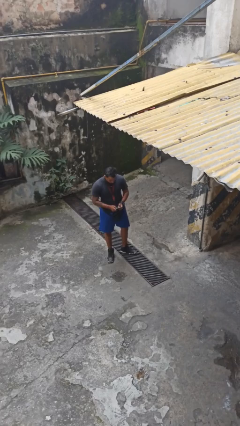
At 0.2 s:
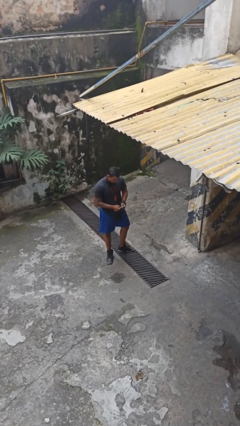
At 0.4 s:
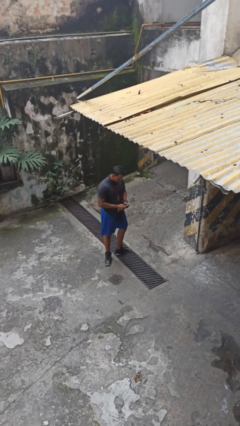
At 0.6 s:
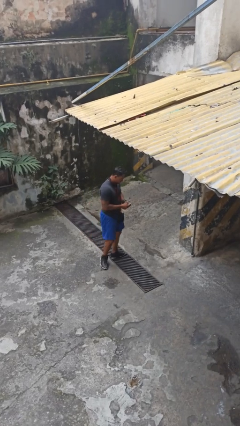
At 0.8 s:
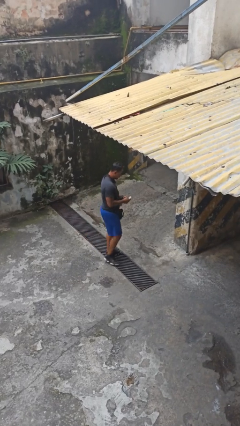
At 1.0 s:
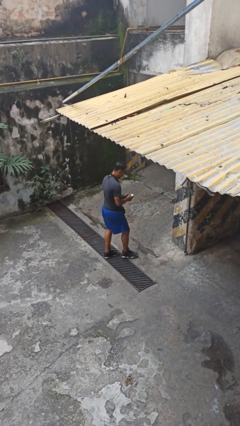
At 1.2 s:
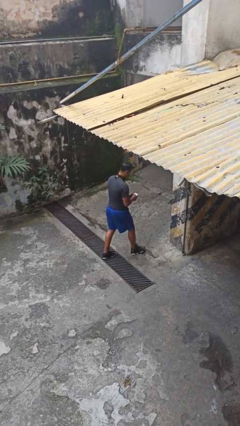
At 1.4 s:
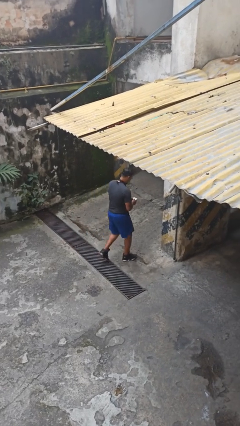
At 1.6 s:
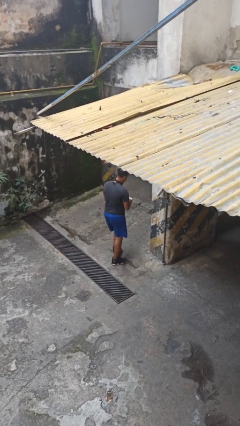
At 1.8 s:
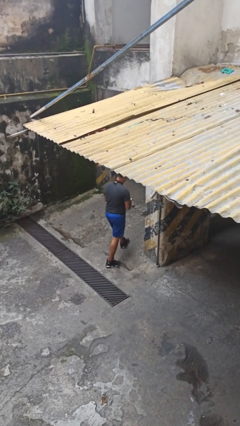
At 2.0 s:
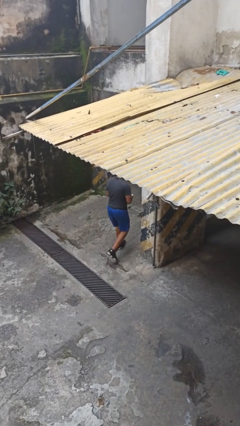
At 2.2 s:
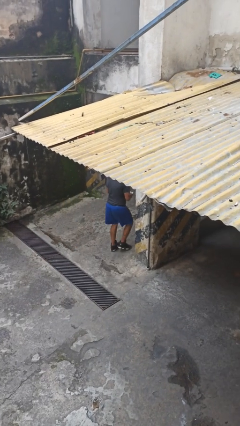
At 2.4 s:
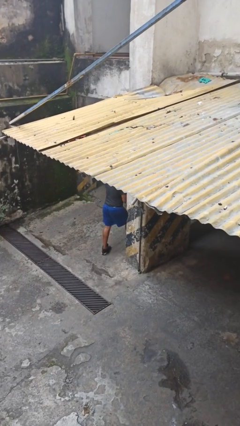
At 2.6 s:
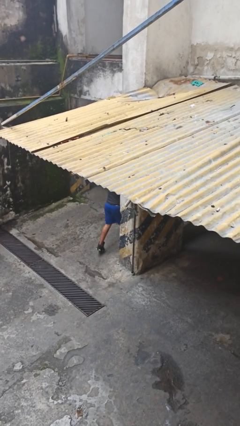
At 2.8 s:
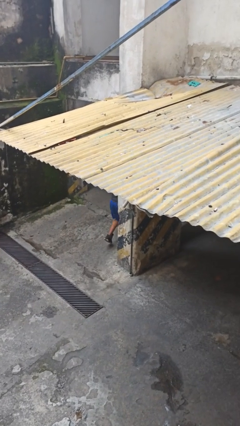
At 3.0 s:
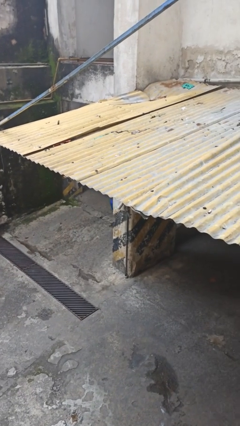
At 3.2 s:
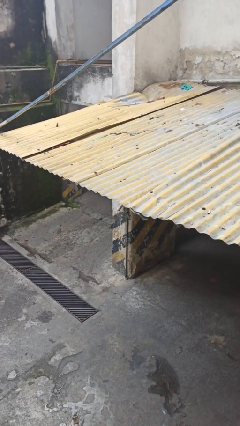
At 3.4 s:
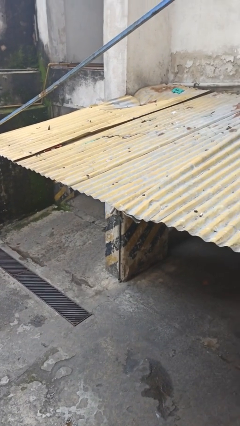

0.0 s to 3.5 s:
person exits scene through structure

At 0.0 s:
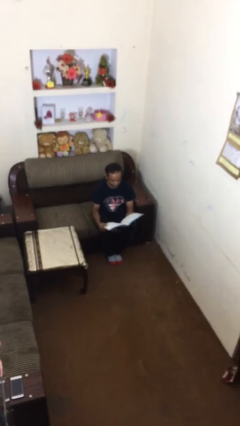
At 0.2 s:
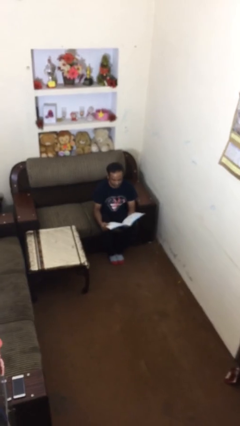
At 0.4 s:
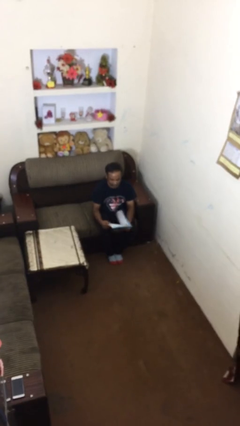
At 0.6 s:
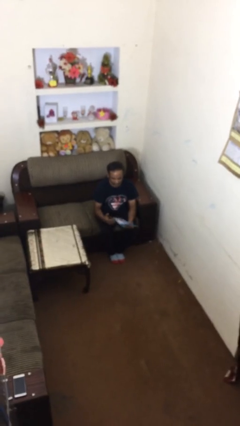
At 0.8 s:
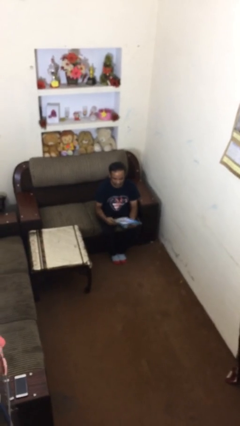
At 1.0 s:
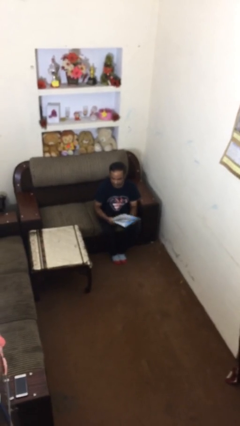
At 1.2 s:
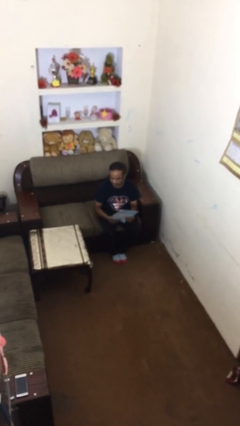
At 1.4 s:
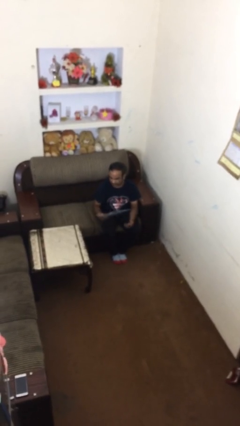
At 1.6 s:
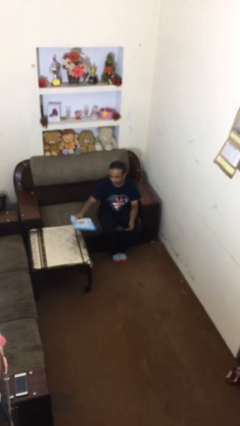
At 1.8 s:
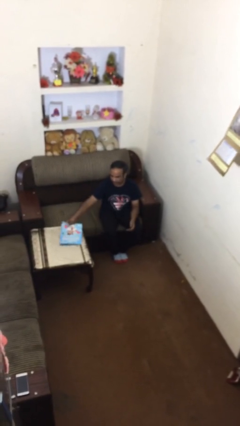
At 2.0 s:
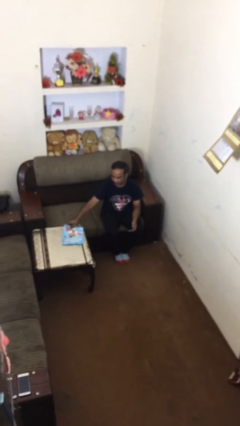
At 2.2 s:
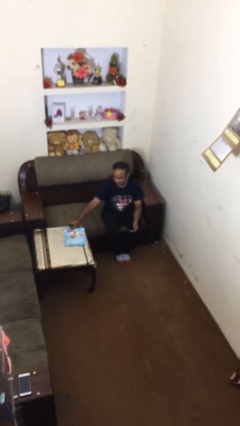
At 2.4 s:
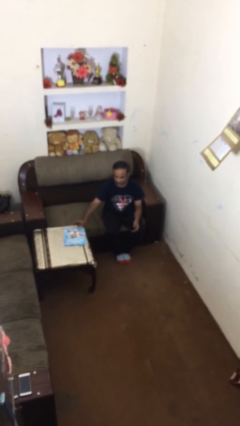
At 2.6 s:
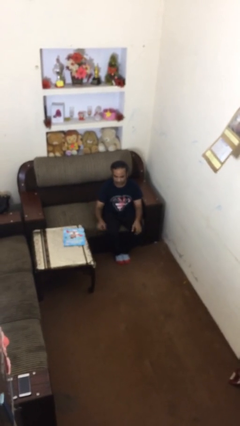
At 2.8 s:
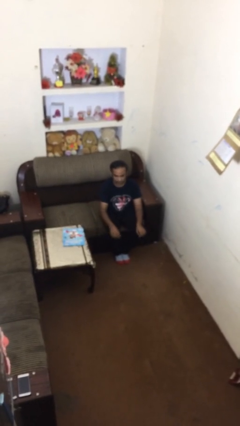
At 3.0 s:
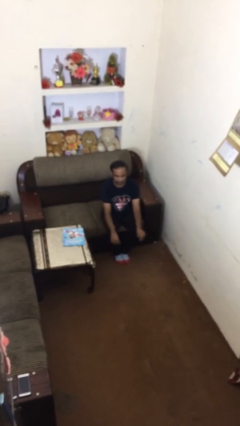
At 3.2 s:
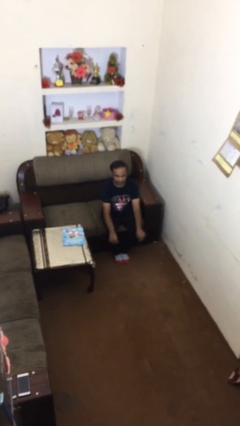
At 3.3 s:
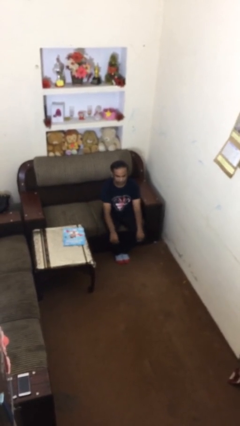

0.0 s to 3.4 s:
person puts down object on table

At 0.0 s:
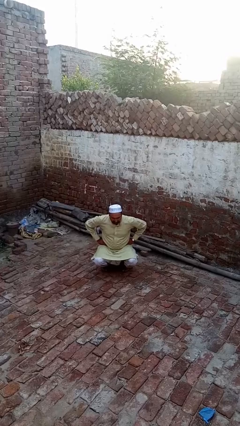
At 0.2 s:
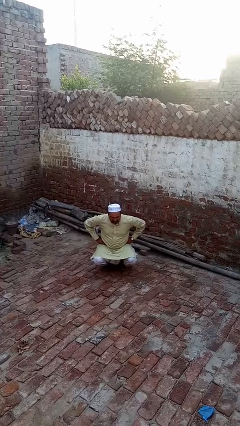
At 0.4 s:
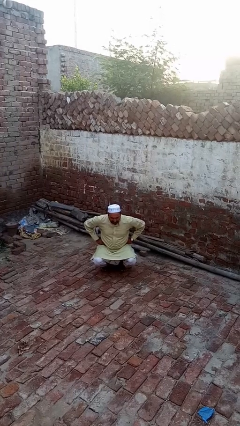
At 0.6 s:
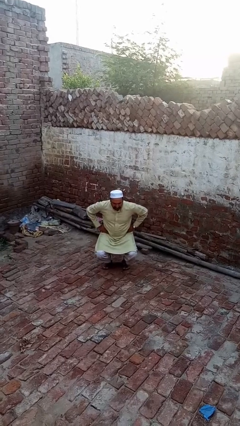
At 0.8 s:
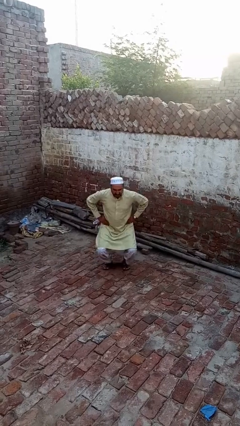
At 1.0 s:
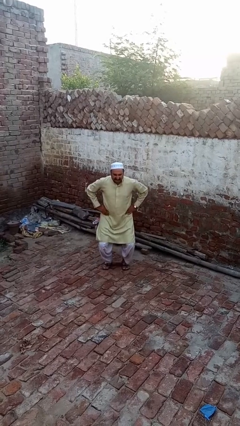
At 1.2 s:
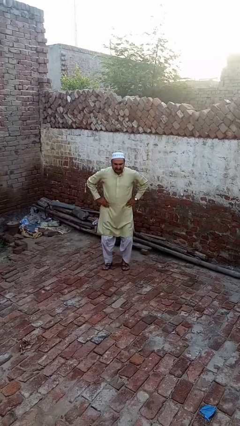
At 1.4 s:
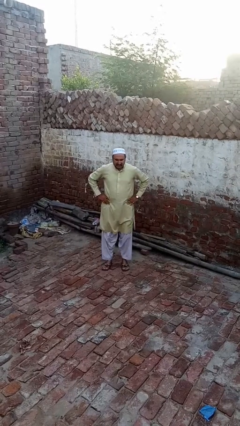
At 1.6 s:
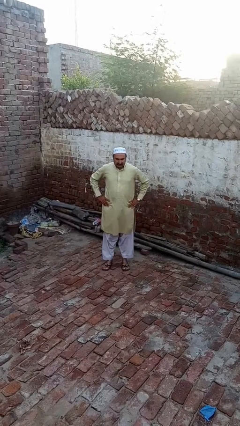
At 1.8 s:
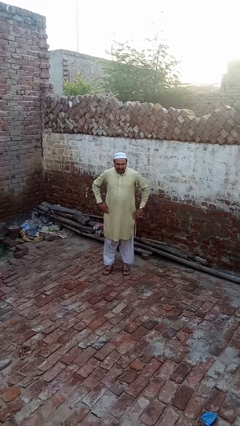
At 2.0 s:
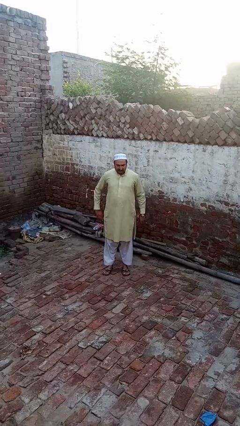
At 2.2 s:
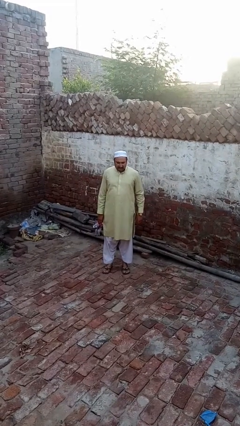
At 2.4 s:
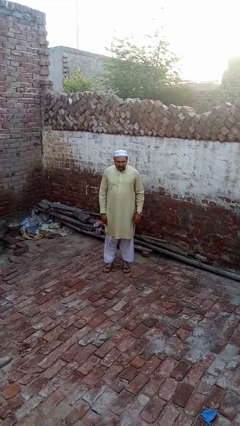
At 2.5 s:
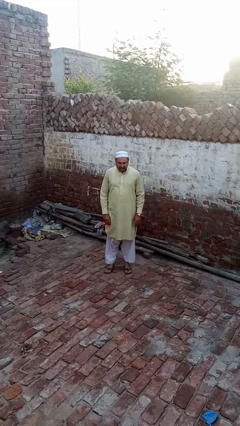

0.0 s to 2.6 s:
person stands up

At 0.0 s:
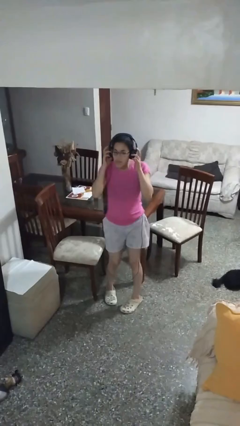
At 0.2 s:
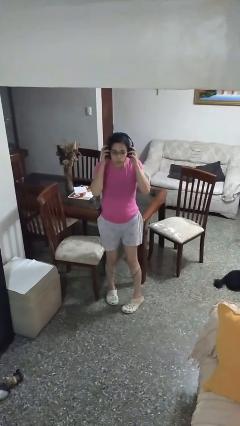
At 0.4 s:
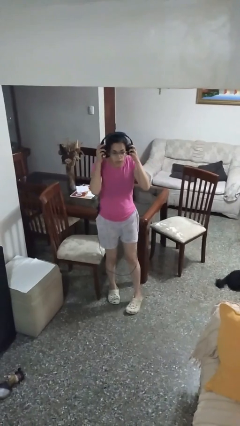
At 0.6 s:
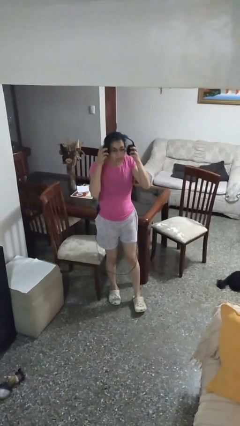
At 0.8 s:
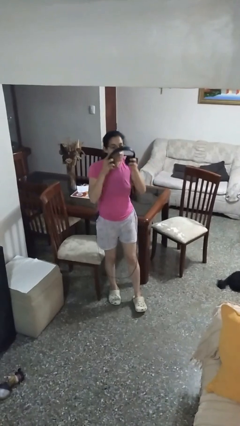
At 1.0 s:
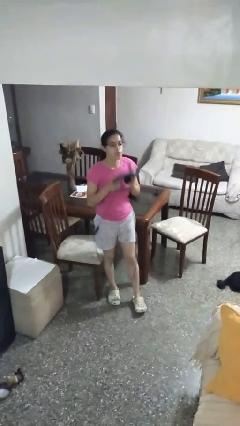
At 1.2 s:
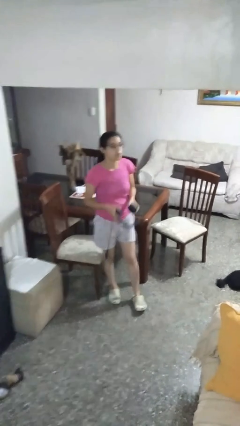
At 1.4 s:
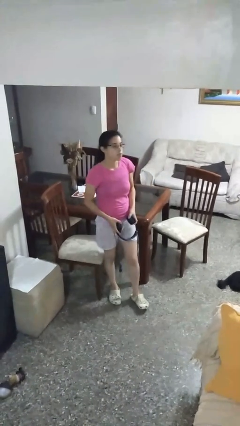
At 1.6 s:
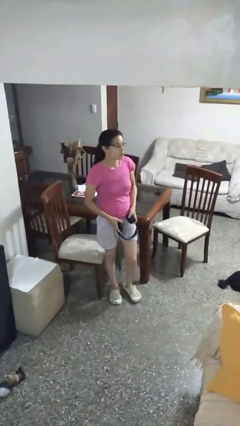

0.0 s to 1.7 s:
person takes off headphones

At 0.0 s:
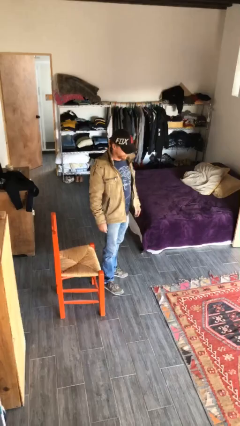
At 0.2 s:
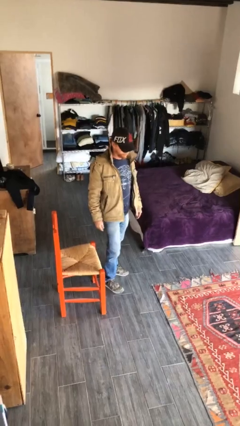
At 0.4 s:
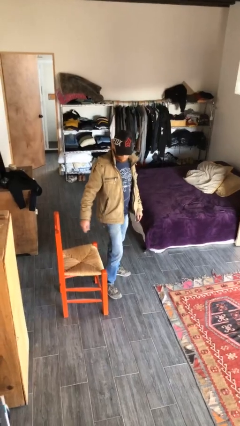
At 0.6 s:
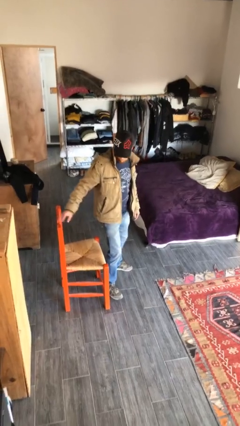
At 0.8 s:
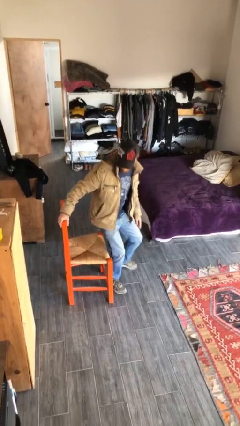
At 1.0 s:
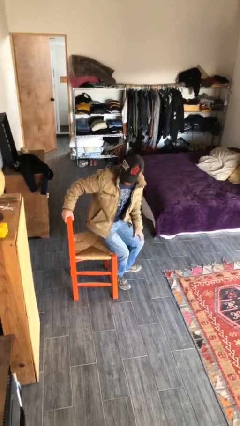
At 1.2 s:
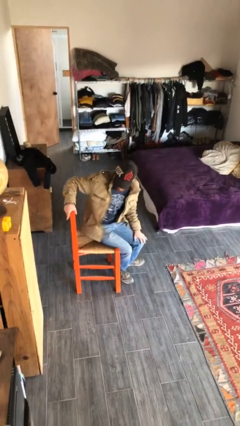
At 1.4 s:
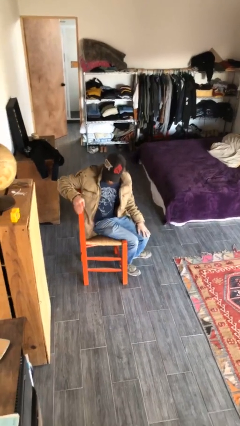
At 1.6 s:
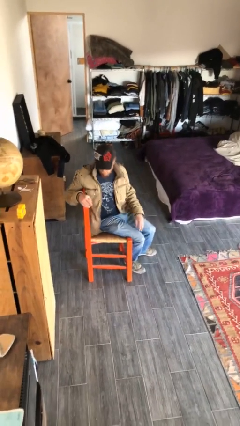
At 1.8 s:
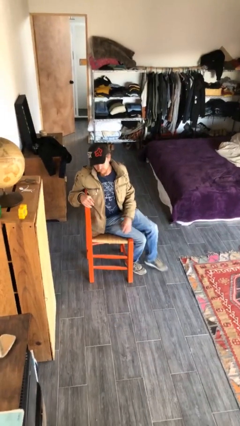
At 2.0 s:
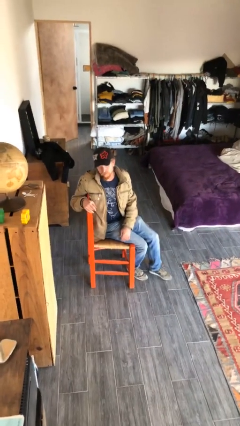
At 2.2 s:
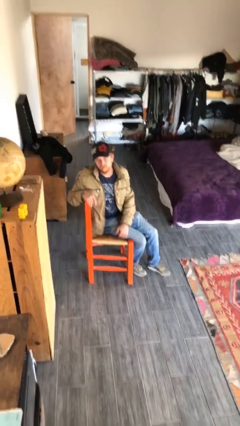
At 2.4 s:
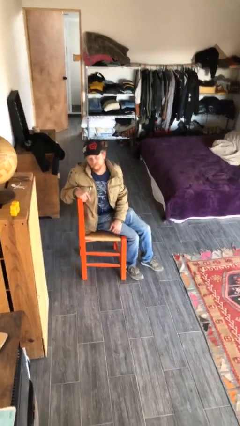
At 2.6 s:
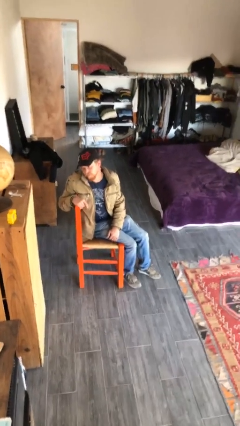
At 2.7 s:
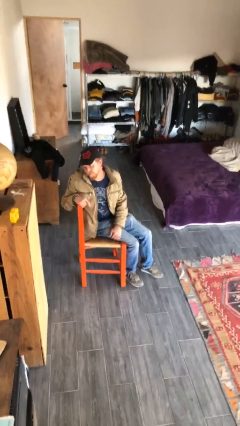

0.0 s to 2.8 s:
person sits down

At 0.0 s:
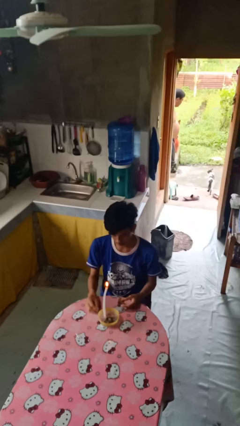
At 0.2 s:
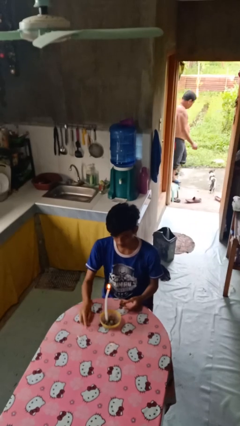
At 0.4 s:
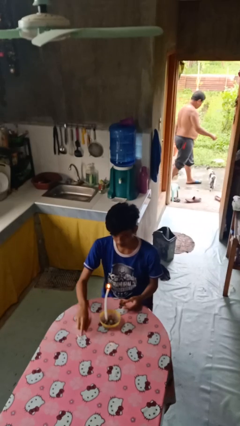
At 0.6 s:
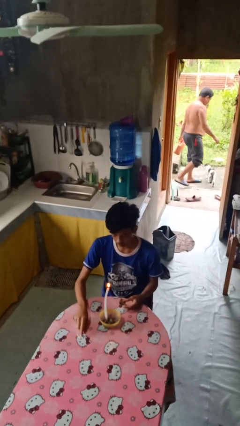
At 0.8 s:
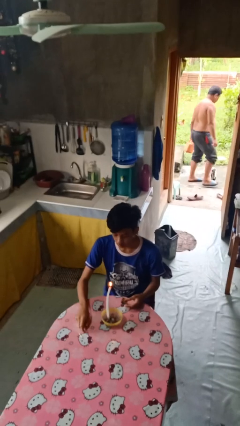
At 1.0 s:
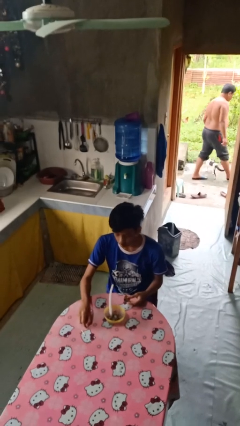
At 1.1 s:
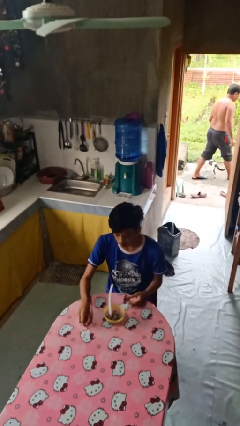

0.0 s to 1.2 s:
person extinguishes candle

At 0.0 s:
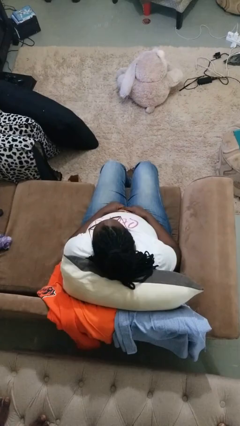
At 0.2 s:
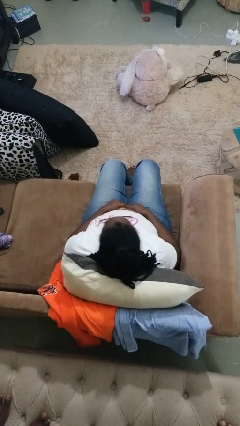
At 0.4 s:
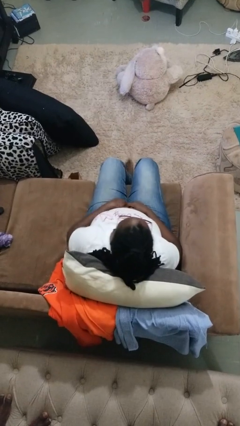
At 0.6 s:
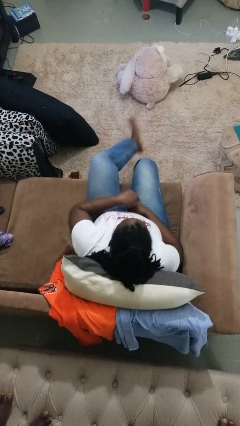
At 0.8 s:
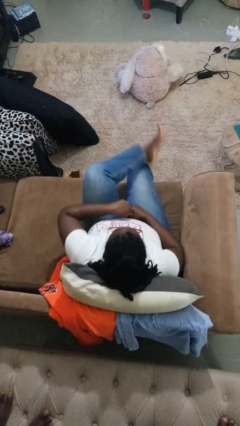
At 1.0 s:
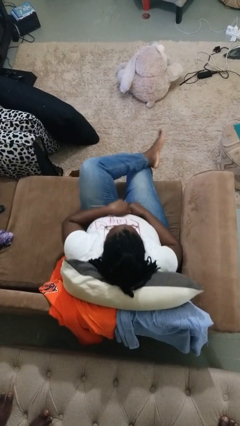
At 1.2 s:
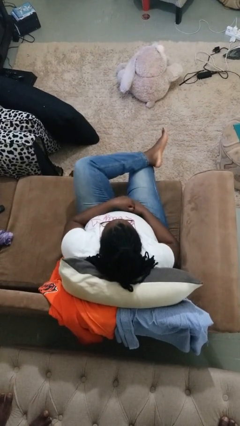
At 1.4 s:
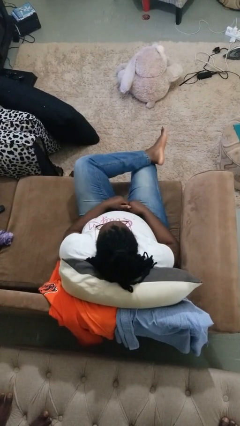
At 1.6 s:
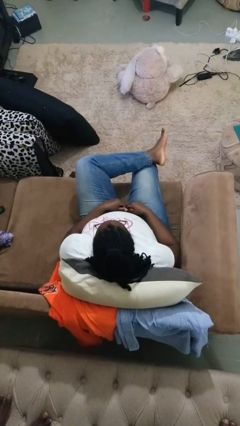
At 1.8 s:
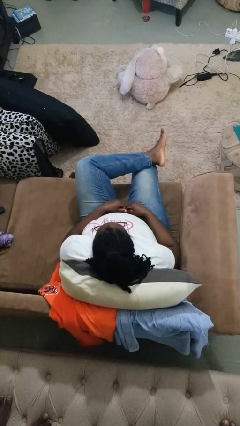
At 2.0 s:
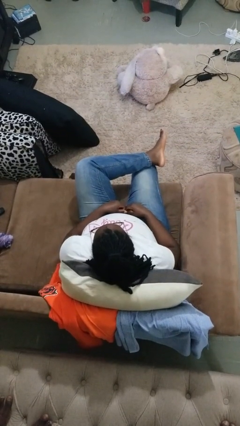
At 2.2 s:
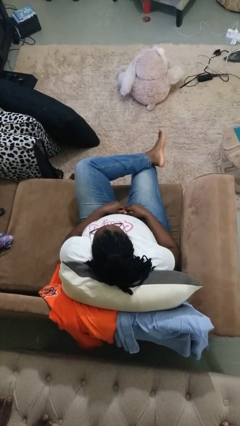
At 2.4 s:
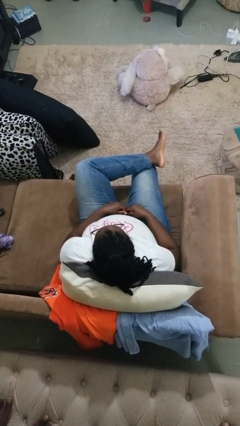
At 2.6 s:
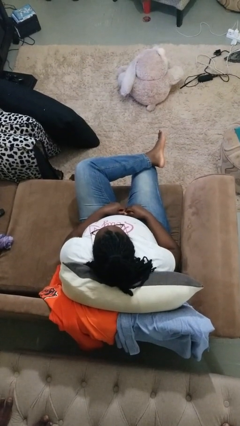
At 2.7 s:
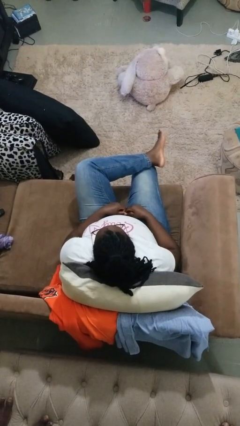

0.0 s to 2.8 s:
person crosses legs
